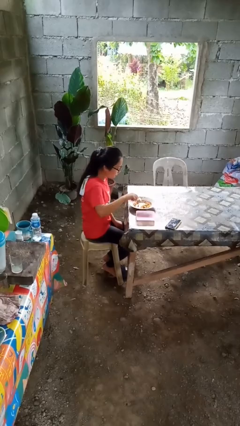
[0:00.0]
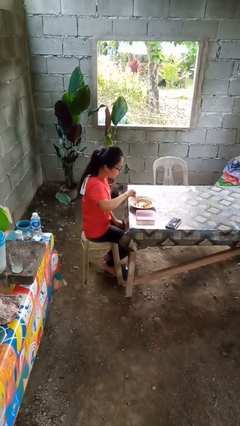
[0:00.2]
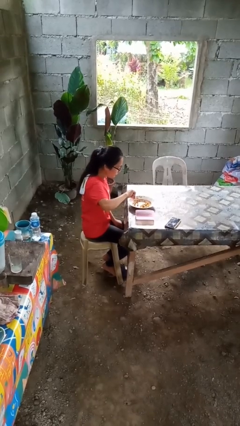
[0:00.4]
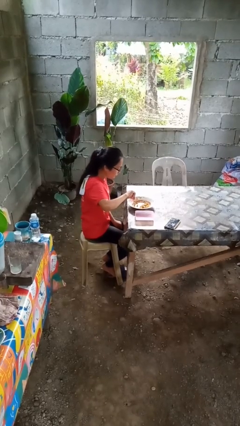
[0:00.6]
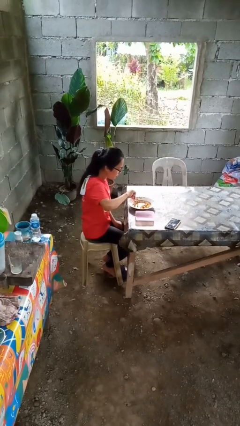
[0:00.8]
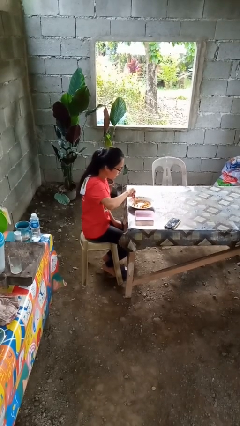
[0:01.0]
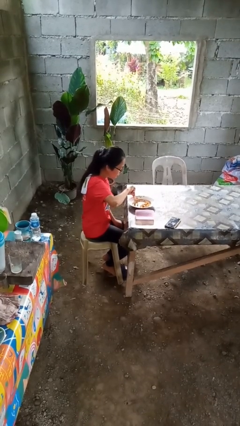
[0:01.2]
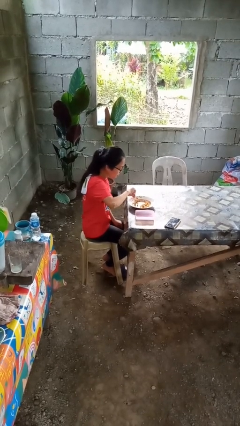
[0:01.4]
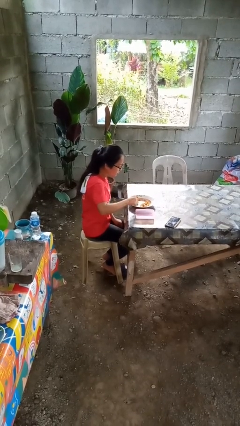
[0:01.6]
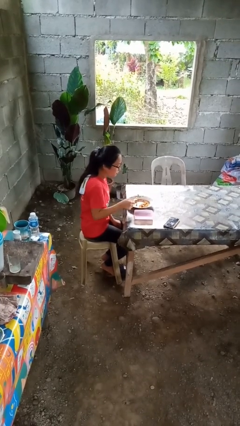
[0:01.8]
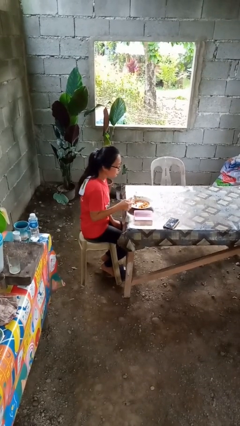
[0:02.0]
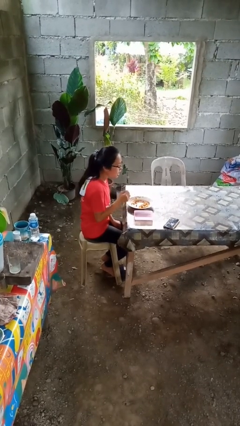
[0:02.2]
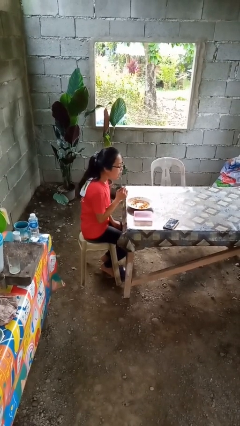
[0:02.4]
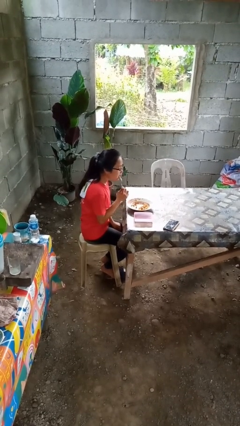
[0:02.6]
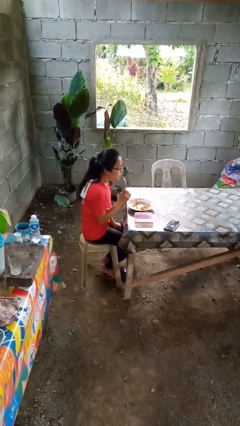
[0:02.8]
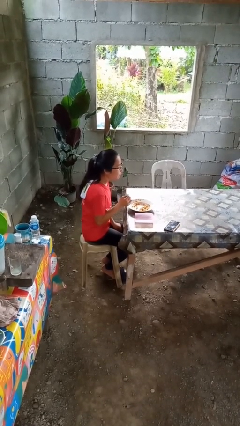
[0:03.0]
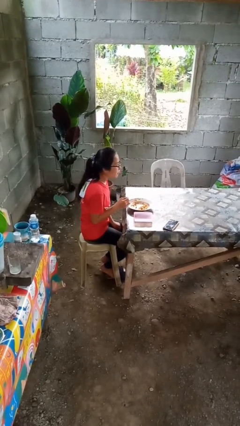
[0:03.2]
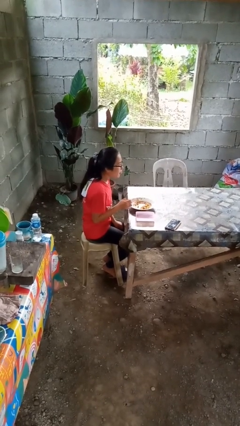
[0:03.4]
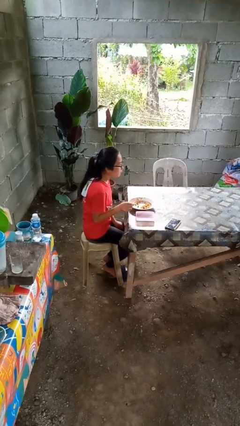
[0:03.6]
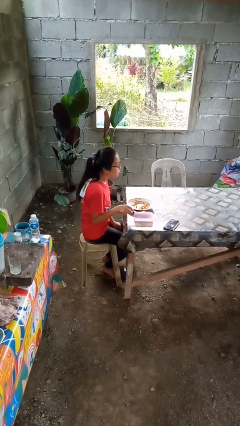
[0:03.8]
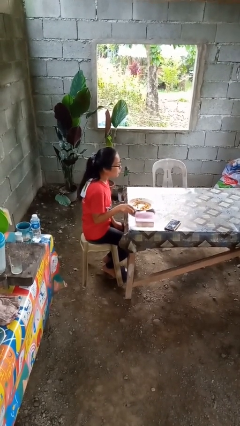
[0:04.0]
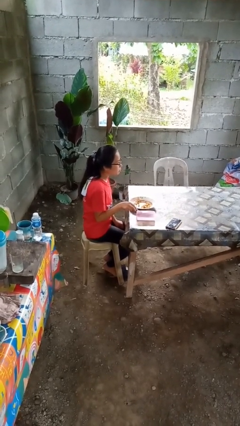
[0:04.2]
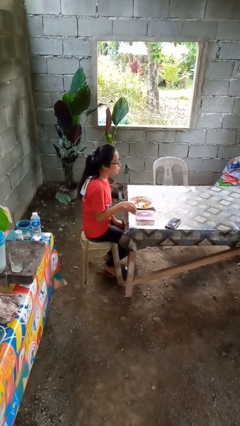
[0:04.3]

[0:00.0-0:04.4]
person eats with utensil

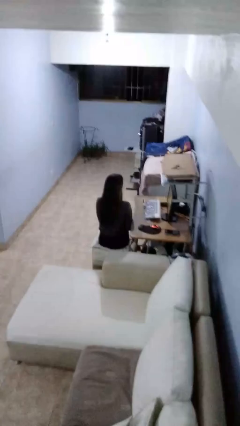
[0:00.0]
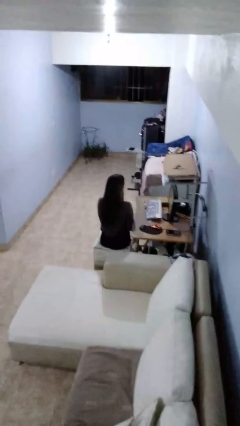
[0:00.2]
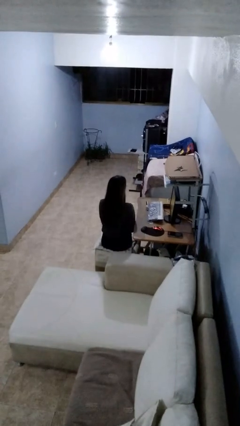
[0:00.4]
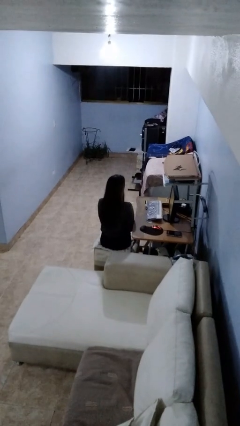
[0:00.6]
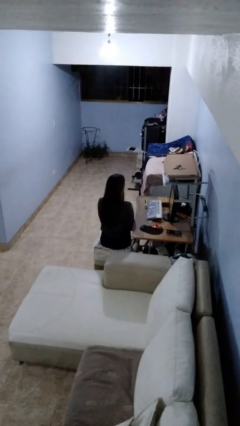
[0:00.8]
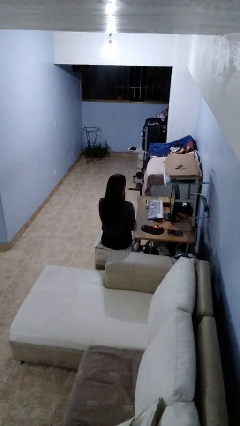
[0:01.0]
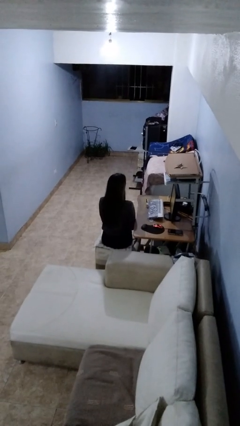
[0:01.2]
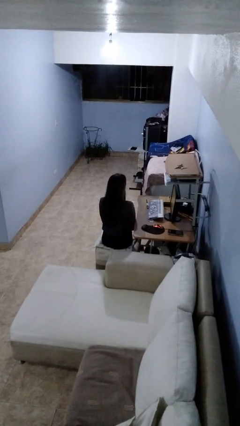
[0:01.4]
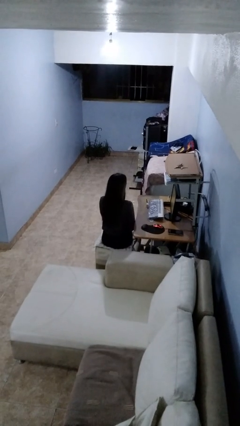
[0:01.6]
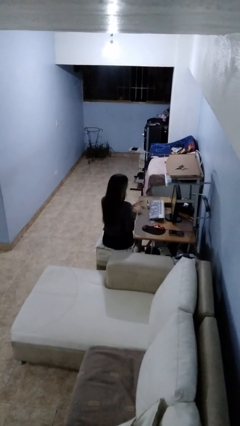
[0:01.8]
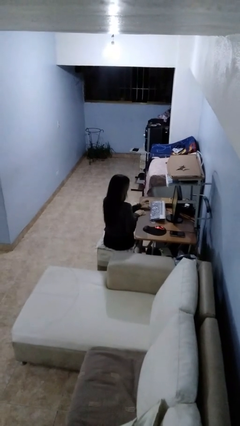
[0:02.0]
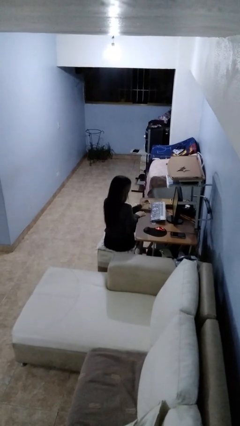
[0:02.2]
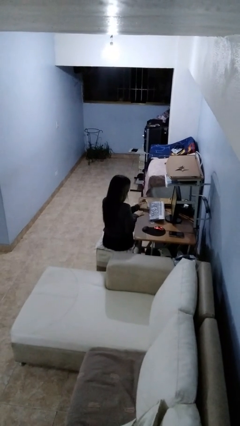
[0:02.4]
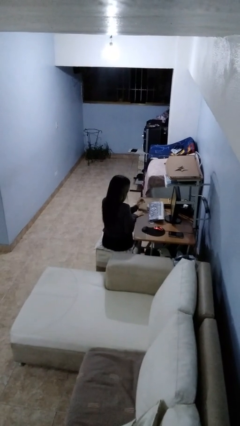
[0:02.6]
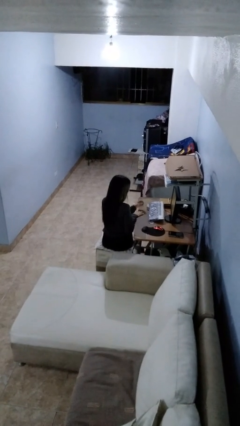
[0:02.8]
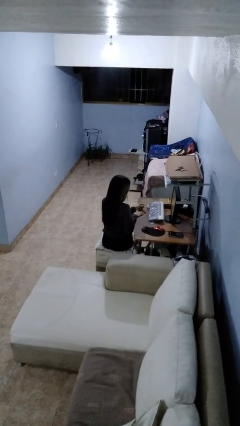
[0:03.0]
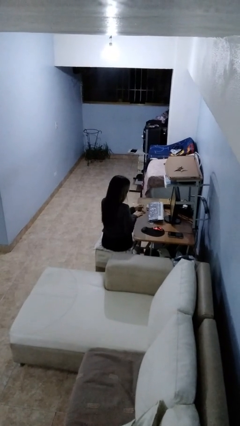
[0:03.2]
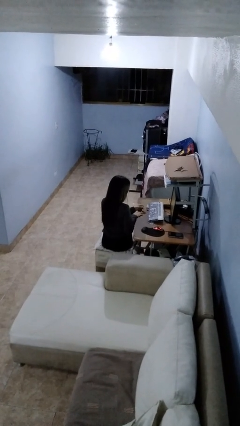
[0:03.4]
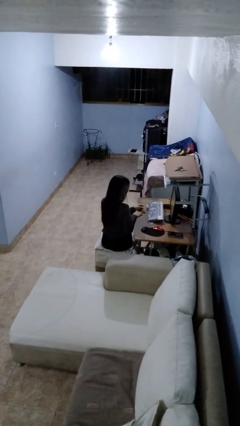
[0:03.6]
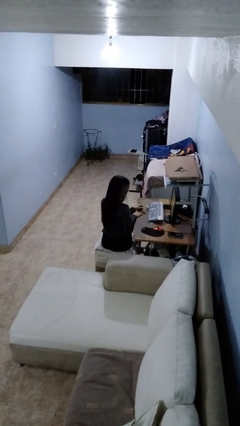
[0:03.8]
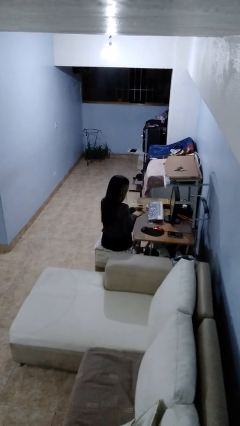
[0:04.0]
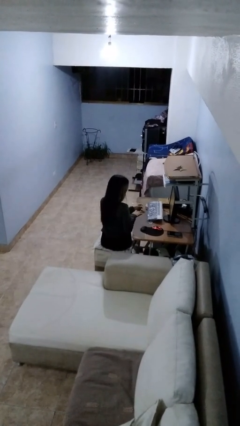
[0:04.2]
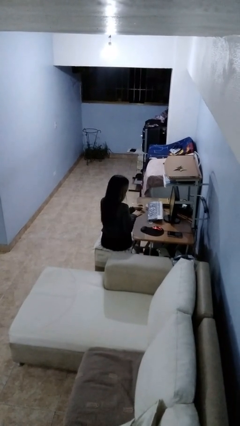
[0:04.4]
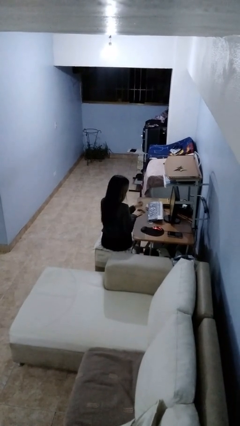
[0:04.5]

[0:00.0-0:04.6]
person paints fingernails

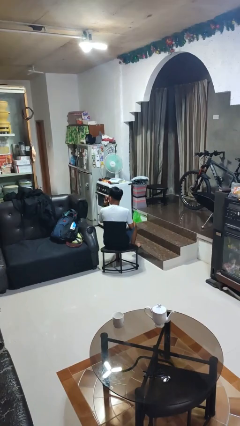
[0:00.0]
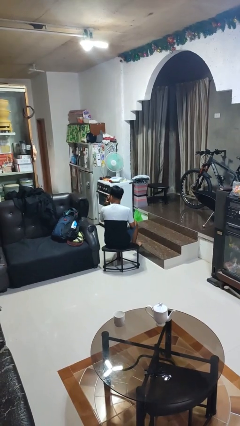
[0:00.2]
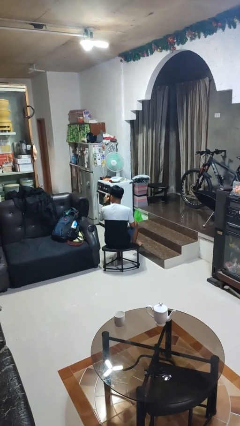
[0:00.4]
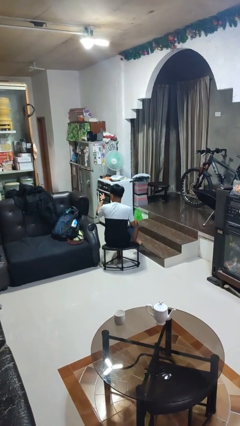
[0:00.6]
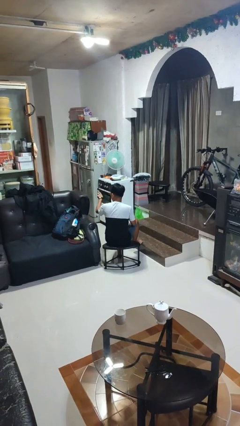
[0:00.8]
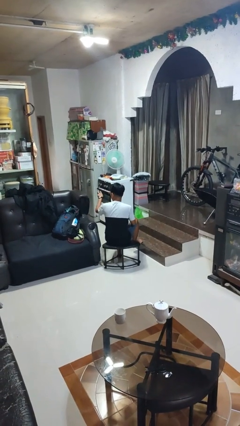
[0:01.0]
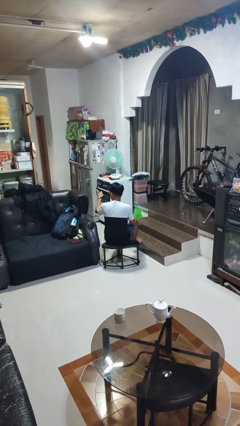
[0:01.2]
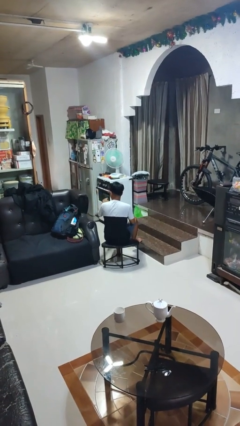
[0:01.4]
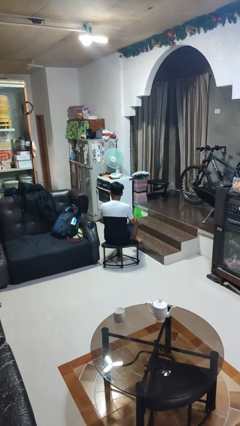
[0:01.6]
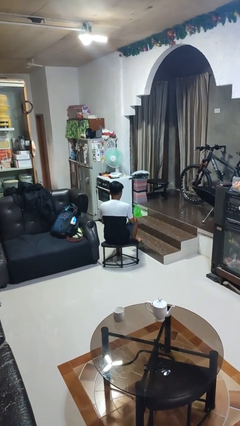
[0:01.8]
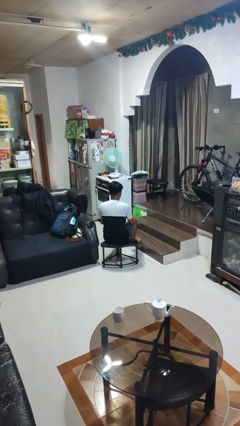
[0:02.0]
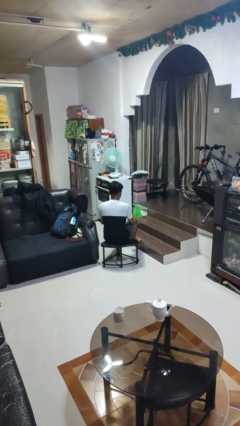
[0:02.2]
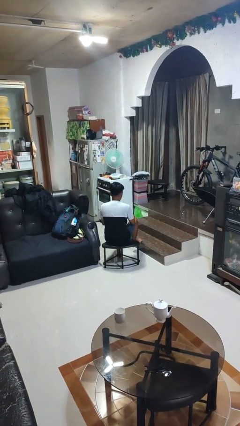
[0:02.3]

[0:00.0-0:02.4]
person gestures watch closely

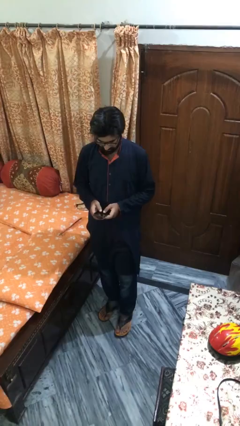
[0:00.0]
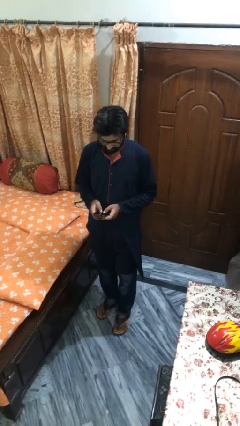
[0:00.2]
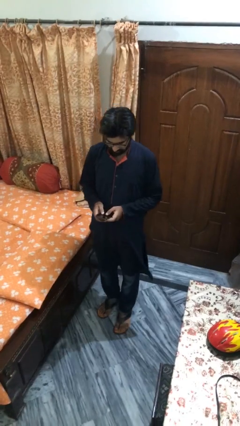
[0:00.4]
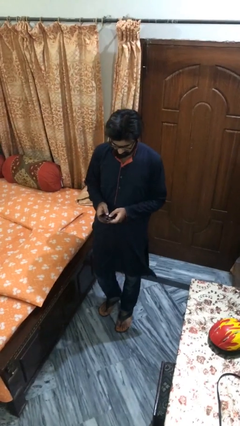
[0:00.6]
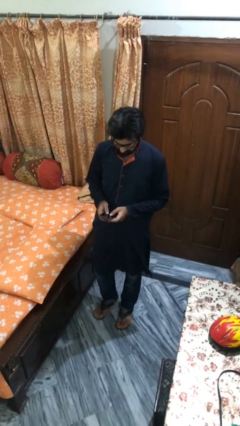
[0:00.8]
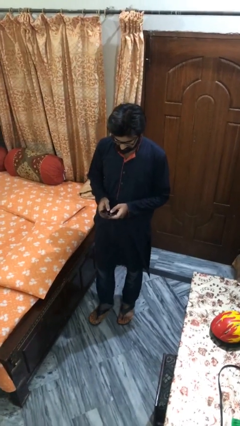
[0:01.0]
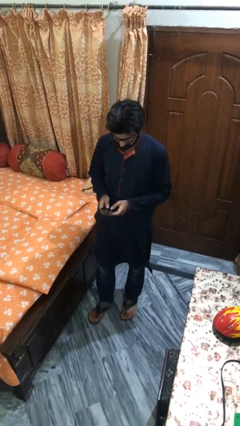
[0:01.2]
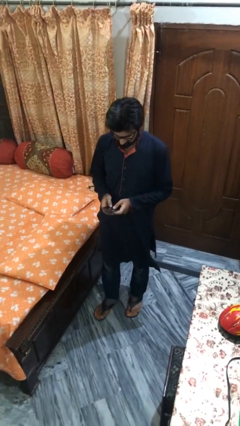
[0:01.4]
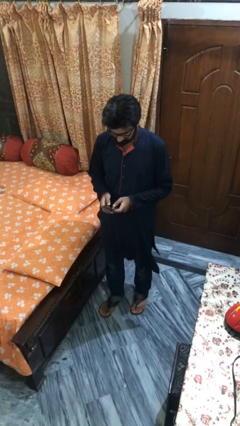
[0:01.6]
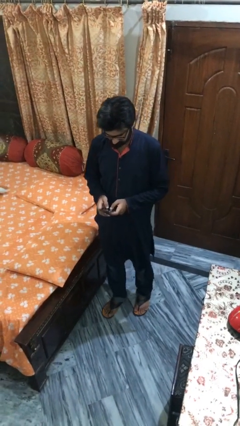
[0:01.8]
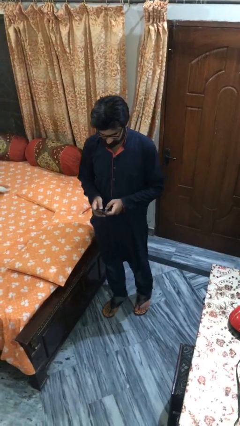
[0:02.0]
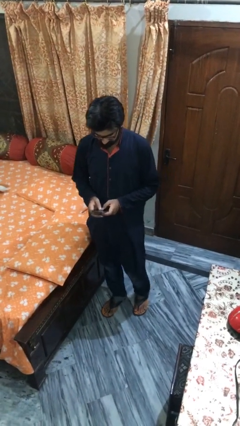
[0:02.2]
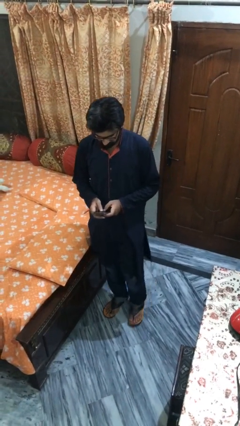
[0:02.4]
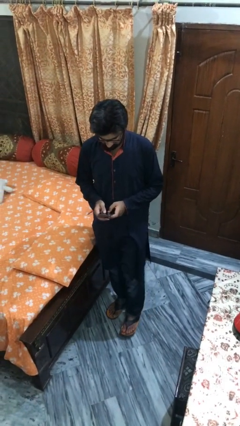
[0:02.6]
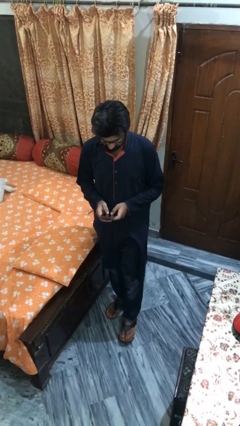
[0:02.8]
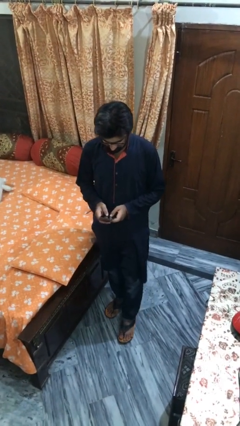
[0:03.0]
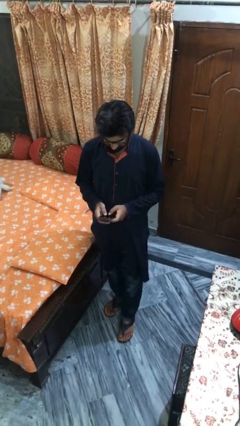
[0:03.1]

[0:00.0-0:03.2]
person texts on phone

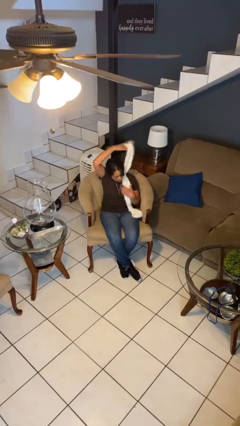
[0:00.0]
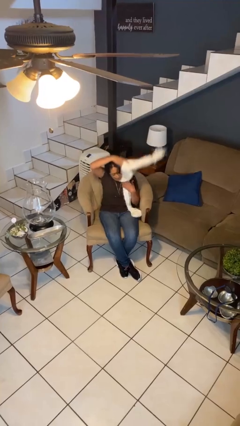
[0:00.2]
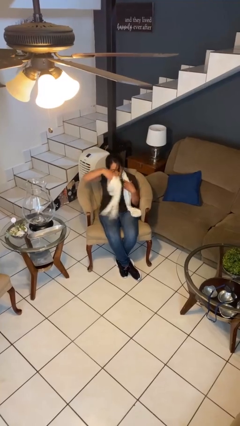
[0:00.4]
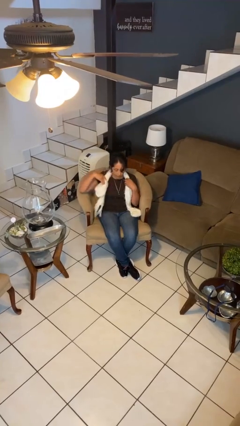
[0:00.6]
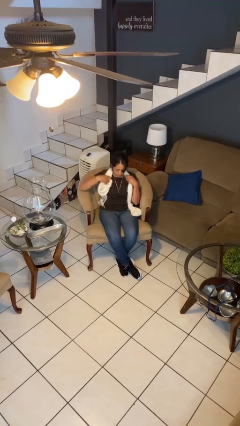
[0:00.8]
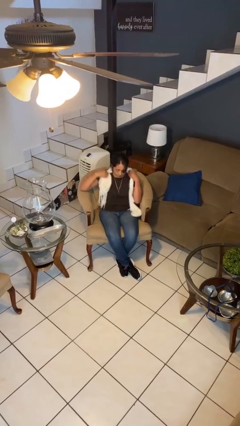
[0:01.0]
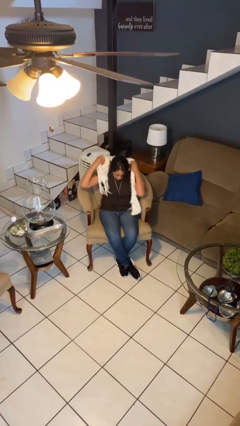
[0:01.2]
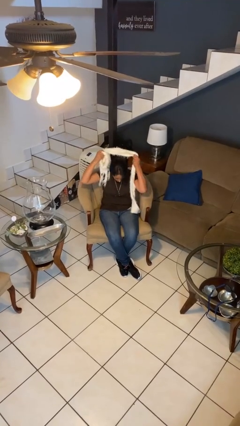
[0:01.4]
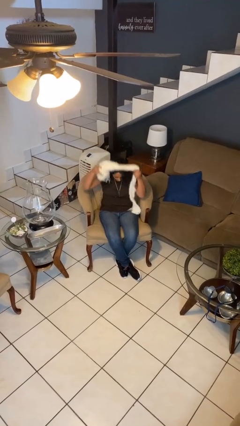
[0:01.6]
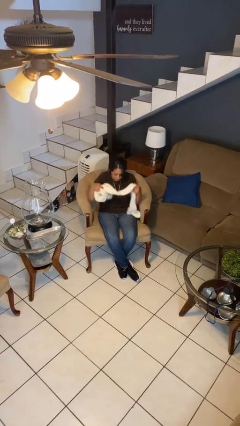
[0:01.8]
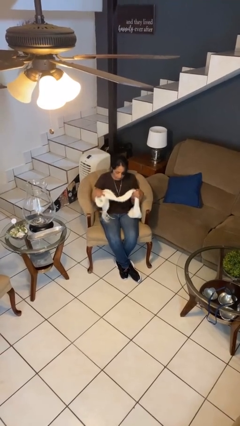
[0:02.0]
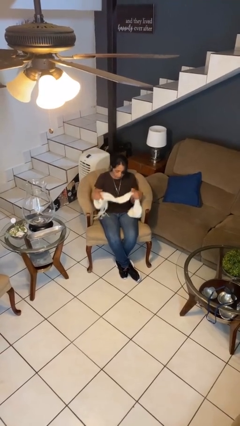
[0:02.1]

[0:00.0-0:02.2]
person takes off scarf

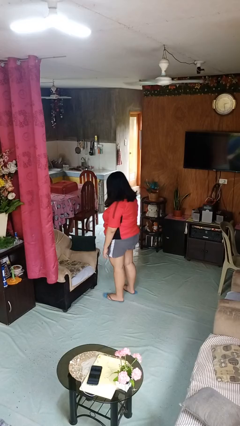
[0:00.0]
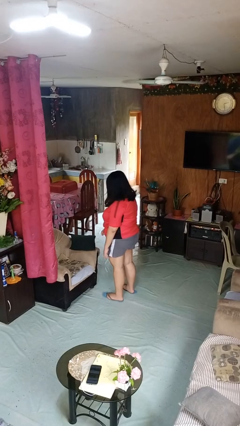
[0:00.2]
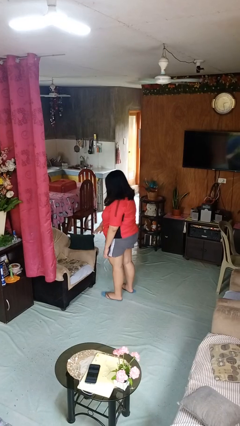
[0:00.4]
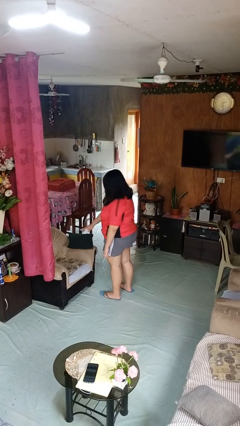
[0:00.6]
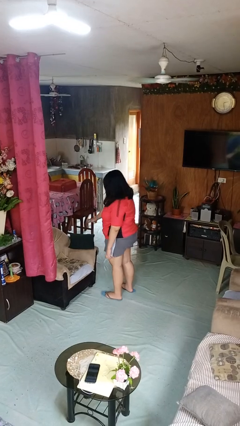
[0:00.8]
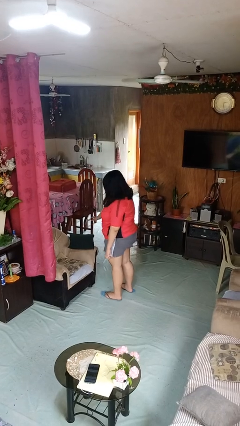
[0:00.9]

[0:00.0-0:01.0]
person waves hand over object
